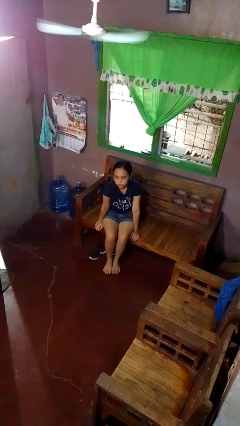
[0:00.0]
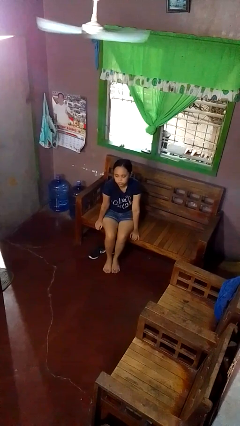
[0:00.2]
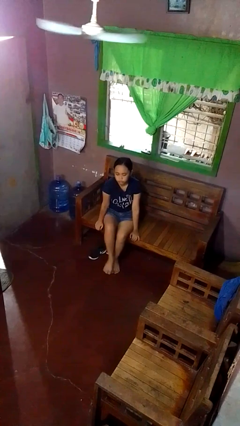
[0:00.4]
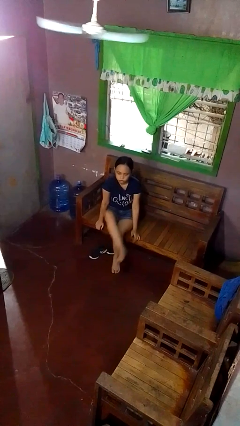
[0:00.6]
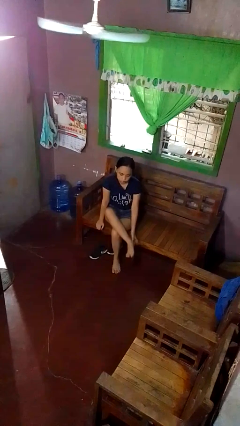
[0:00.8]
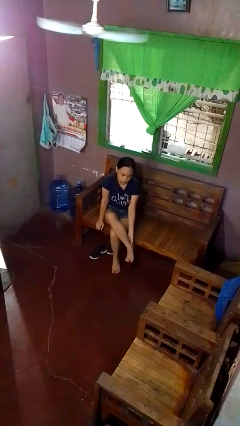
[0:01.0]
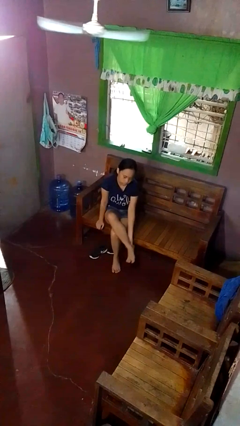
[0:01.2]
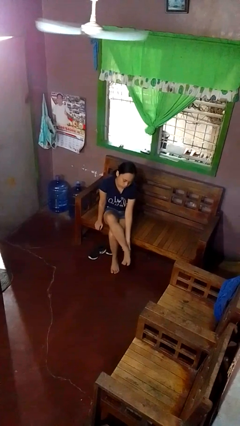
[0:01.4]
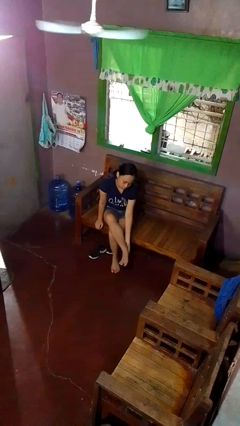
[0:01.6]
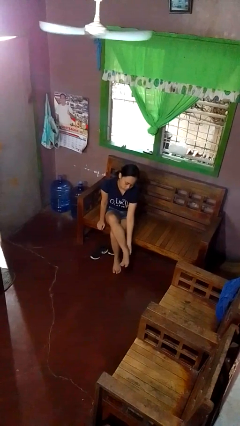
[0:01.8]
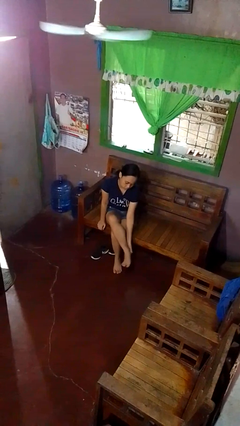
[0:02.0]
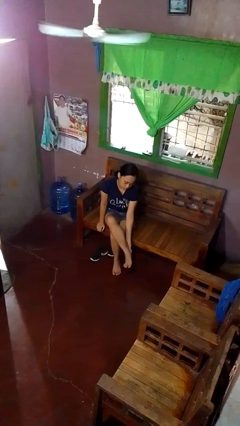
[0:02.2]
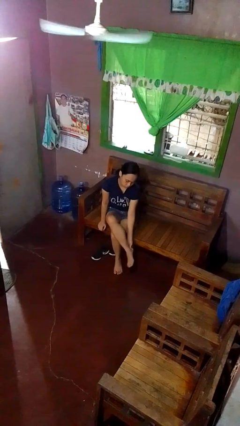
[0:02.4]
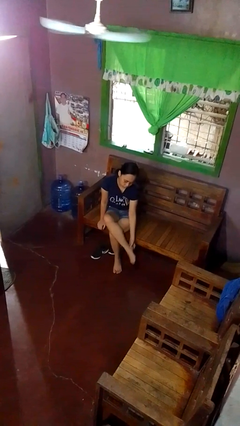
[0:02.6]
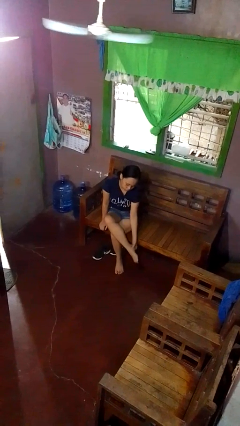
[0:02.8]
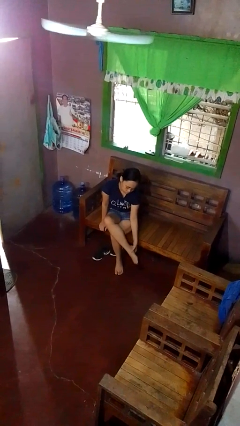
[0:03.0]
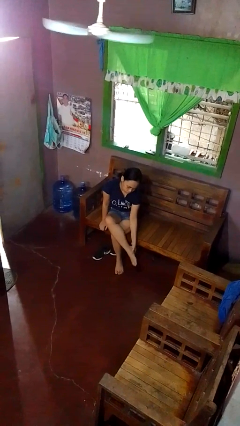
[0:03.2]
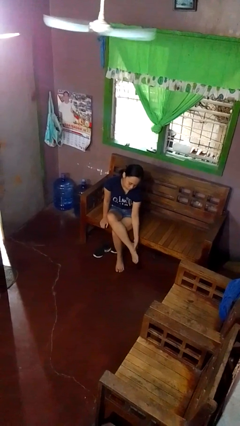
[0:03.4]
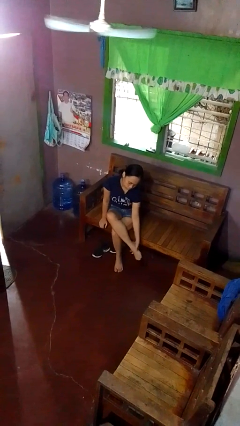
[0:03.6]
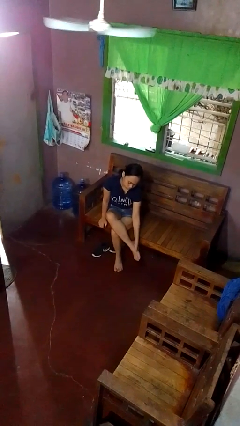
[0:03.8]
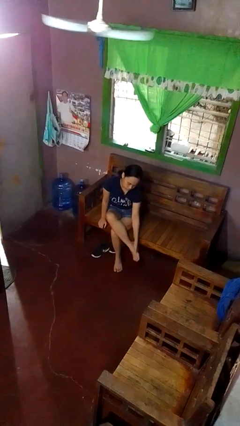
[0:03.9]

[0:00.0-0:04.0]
person rubs foot

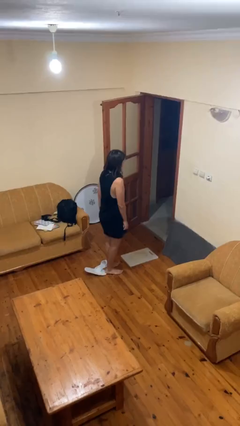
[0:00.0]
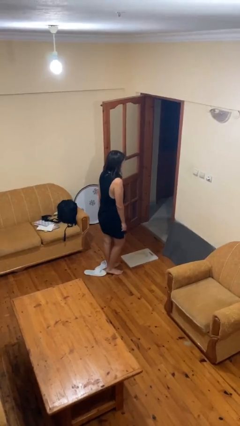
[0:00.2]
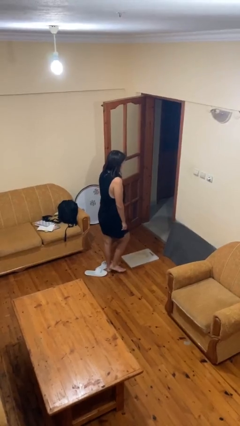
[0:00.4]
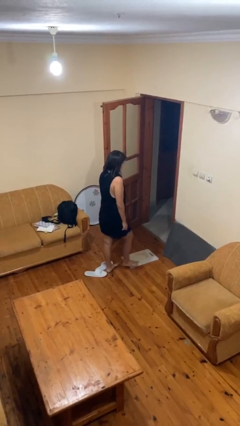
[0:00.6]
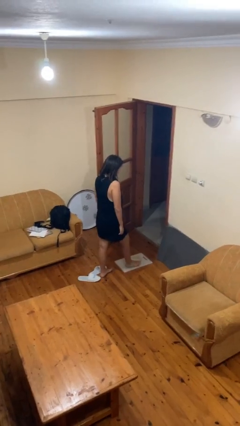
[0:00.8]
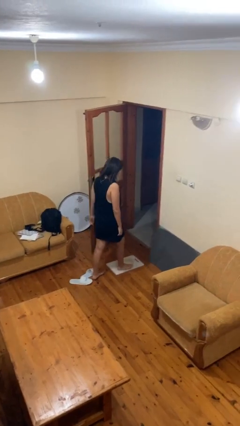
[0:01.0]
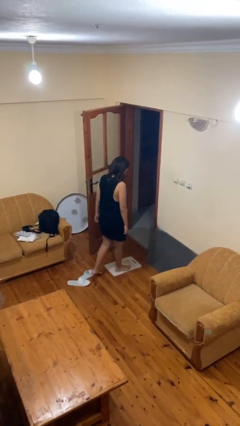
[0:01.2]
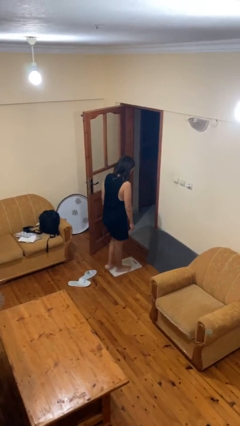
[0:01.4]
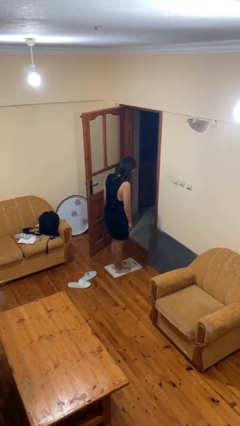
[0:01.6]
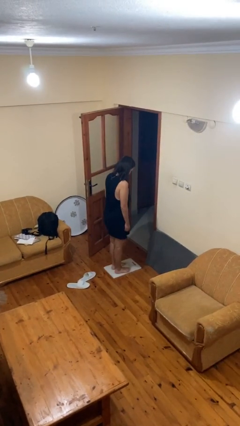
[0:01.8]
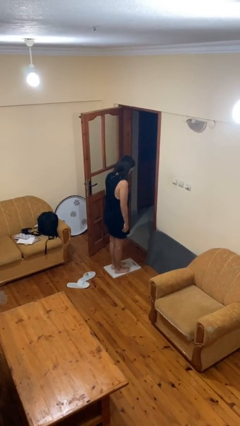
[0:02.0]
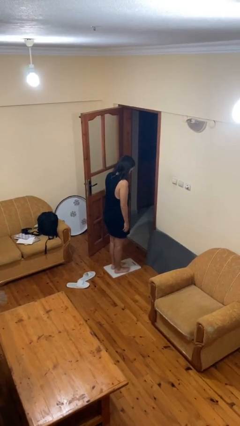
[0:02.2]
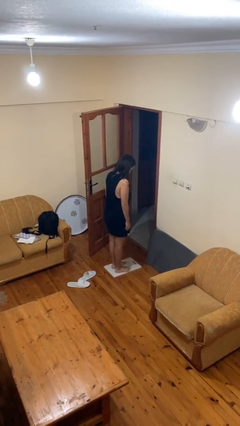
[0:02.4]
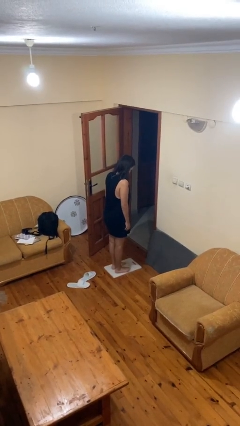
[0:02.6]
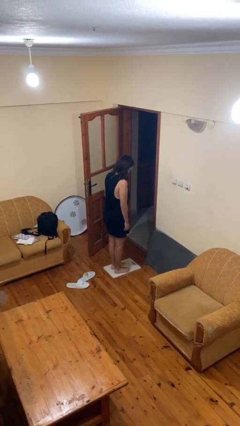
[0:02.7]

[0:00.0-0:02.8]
person uses bodyweight scale

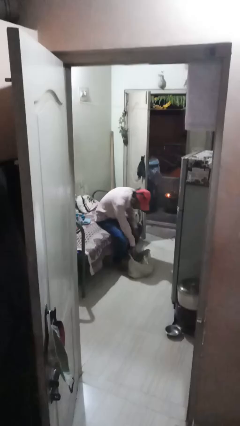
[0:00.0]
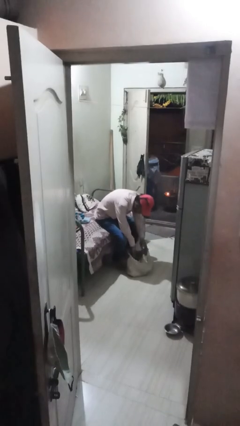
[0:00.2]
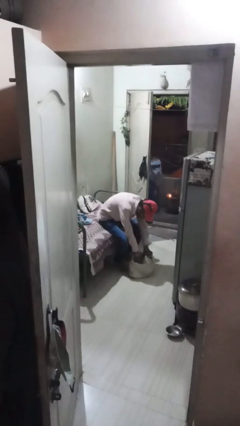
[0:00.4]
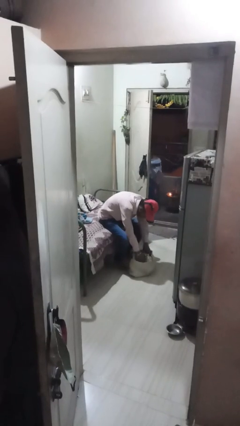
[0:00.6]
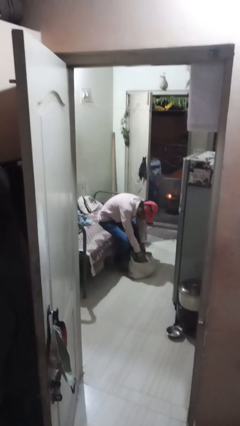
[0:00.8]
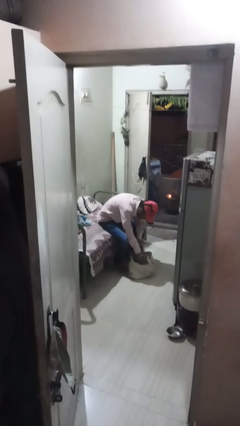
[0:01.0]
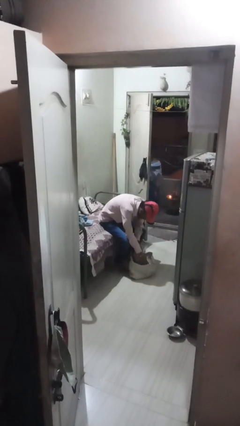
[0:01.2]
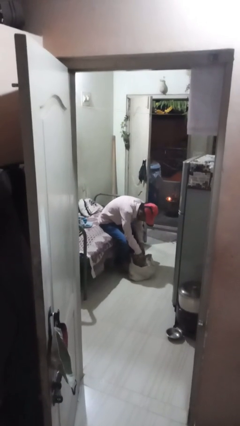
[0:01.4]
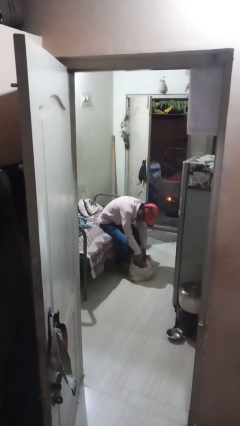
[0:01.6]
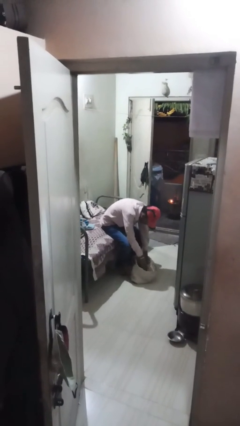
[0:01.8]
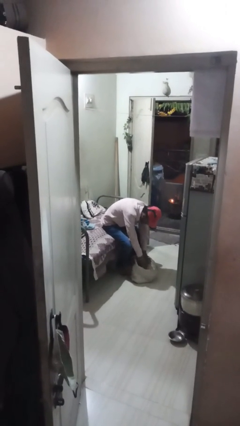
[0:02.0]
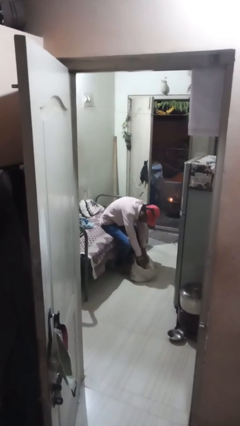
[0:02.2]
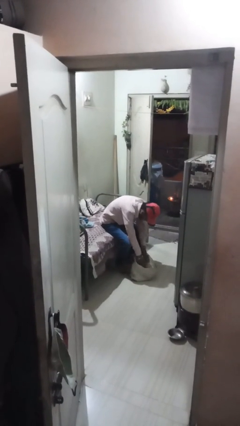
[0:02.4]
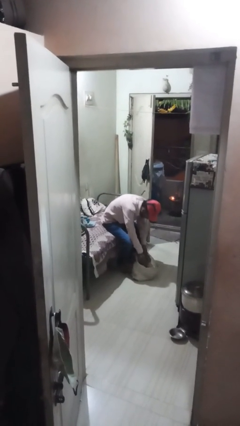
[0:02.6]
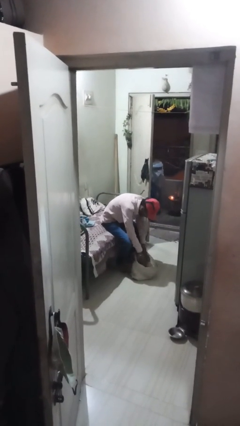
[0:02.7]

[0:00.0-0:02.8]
person searches in bag

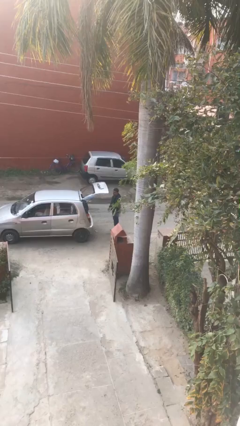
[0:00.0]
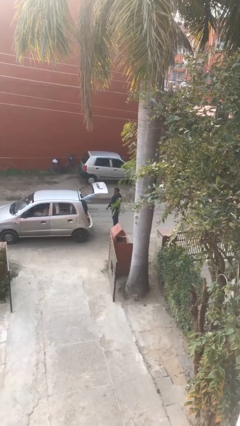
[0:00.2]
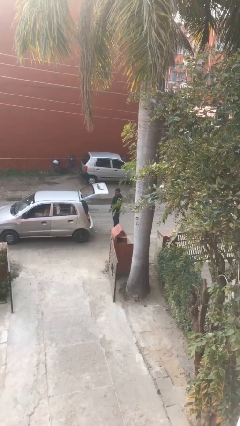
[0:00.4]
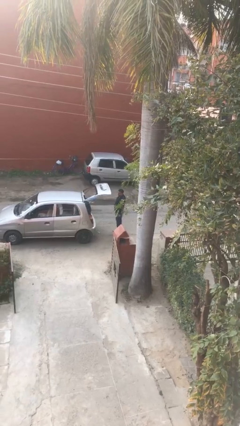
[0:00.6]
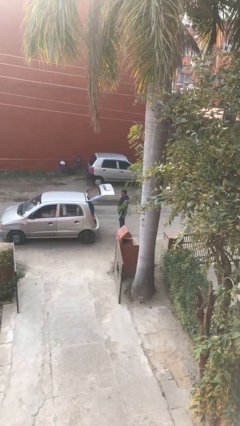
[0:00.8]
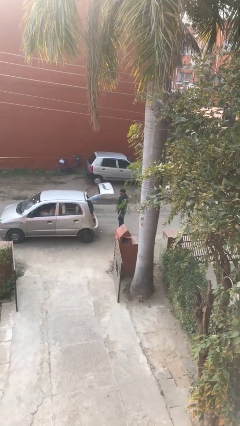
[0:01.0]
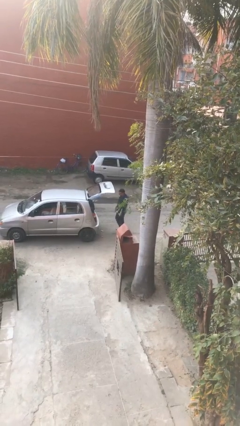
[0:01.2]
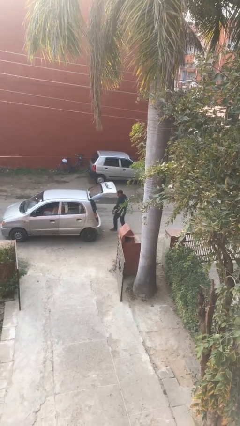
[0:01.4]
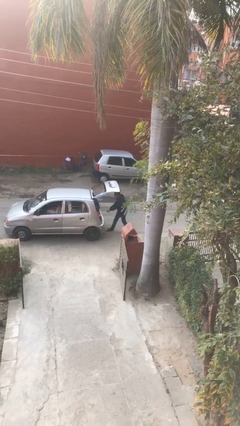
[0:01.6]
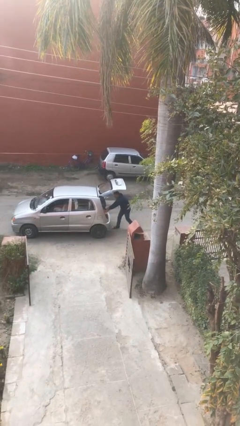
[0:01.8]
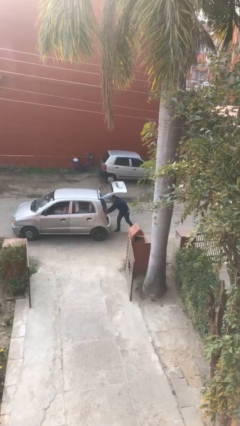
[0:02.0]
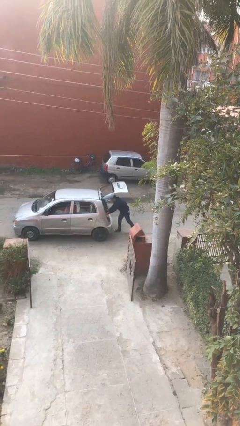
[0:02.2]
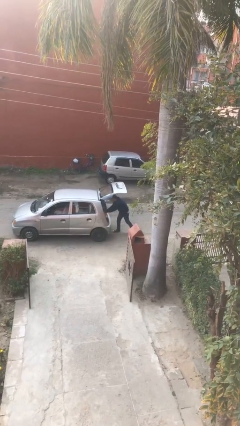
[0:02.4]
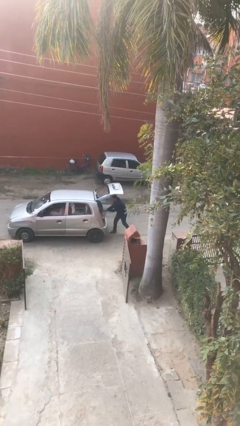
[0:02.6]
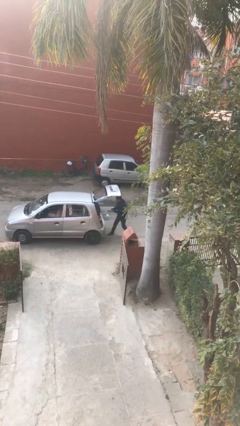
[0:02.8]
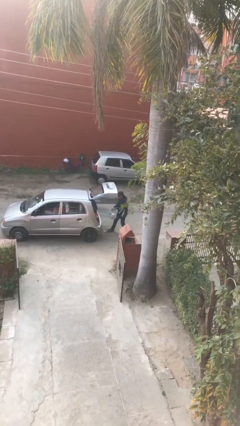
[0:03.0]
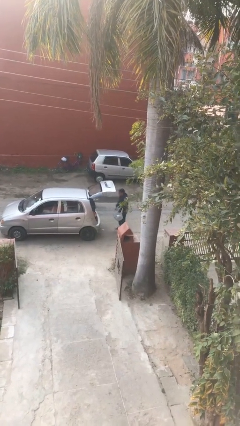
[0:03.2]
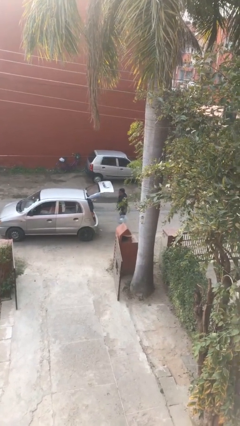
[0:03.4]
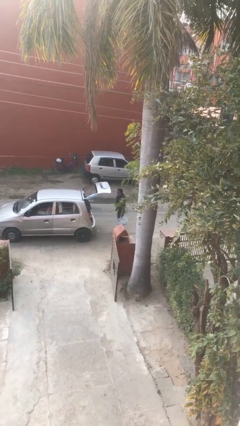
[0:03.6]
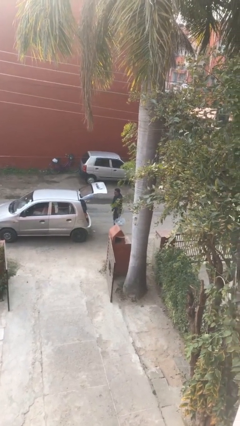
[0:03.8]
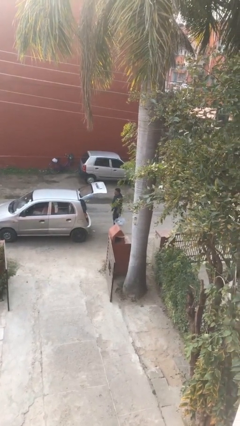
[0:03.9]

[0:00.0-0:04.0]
person unloads car

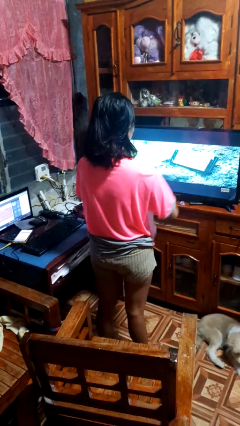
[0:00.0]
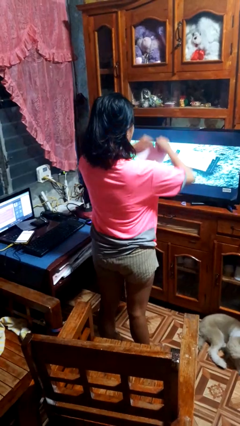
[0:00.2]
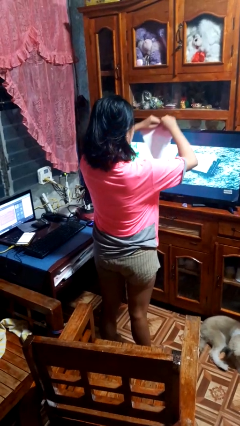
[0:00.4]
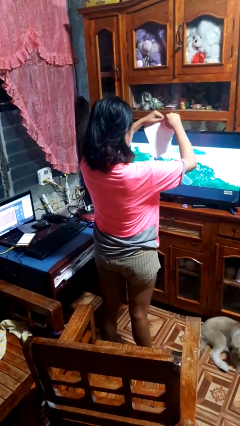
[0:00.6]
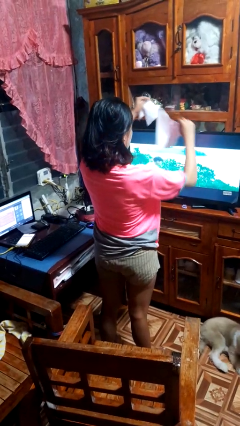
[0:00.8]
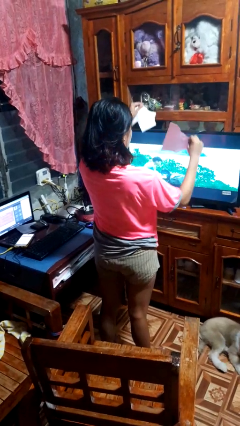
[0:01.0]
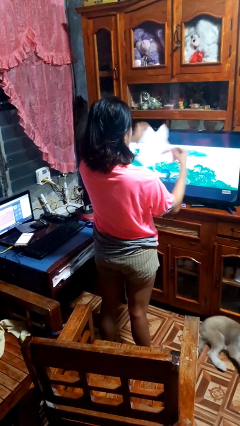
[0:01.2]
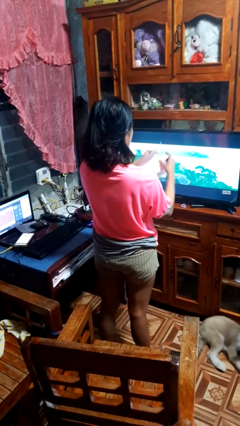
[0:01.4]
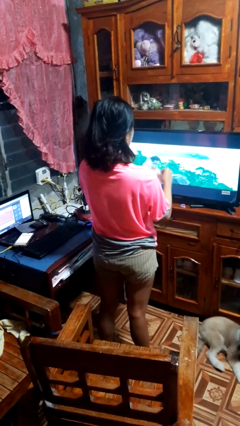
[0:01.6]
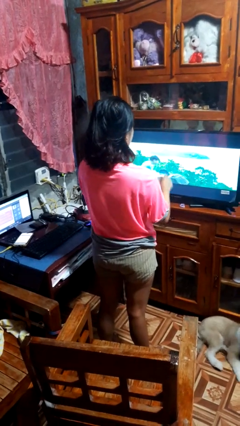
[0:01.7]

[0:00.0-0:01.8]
person tears paper

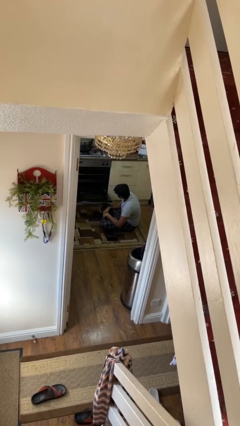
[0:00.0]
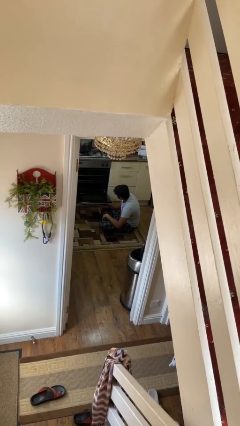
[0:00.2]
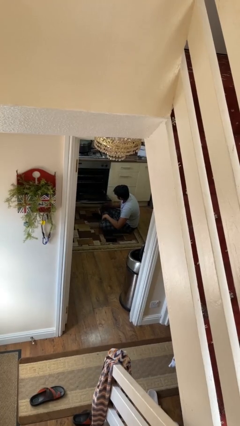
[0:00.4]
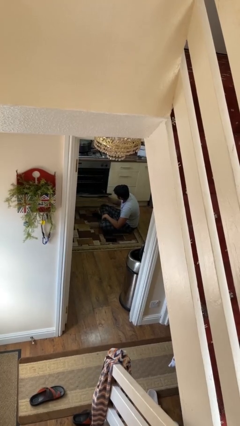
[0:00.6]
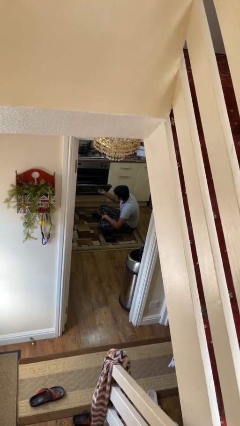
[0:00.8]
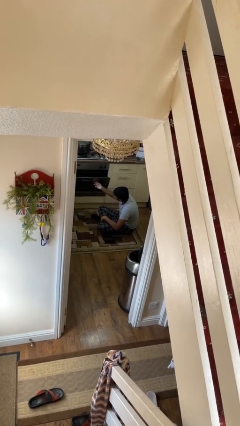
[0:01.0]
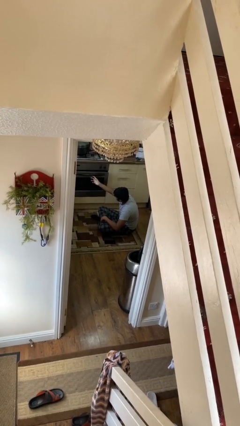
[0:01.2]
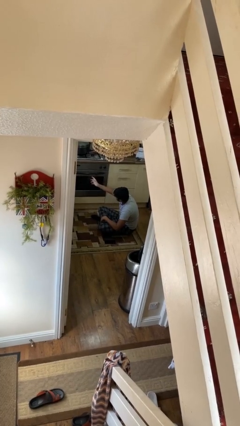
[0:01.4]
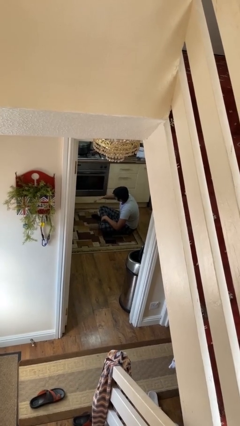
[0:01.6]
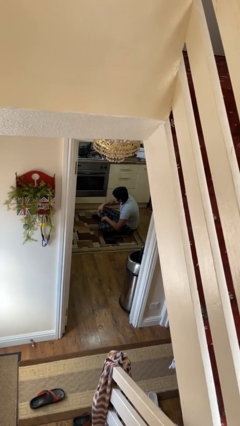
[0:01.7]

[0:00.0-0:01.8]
person closes oven door

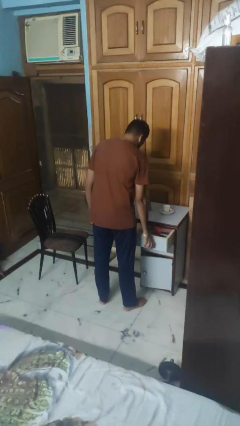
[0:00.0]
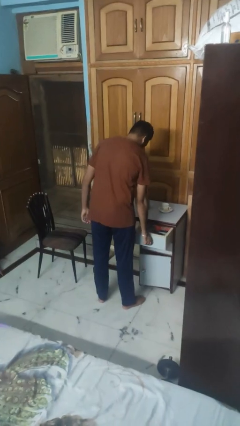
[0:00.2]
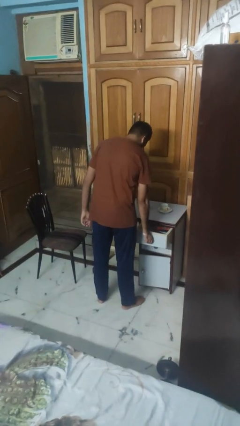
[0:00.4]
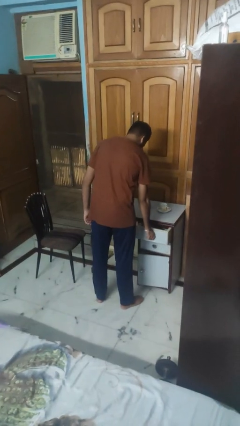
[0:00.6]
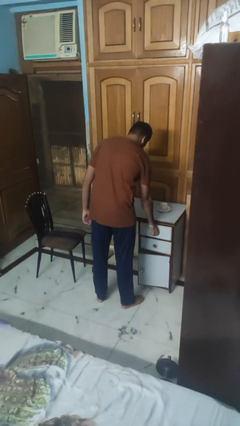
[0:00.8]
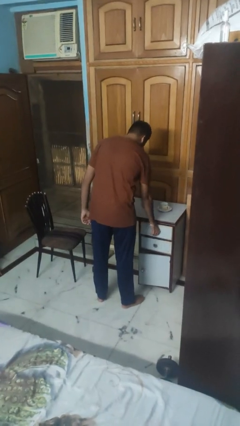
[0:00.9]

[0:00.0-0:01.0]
person closes kitchen drawer
